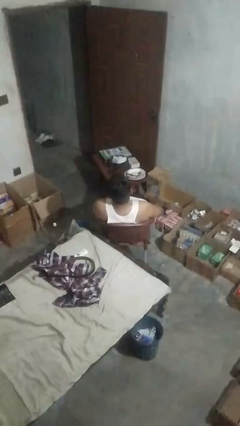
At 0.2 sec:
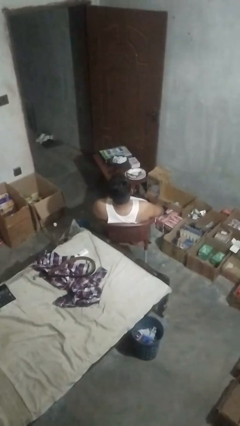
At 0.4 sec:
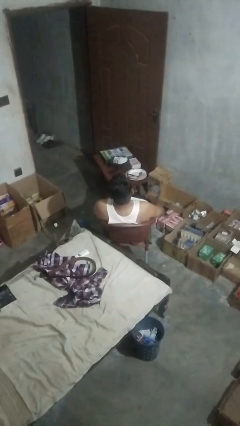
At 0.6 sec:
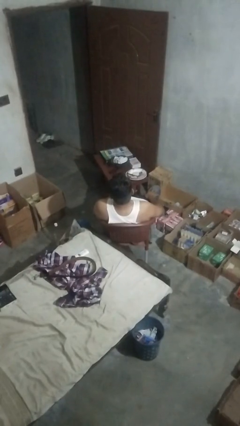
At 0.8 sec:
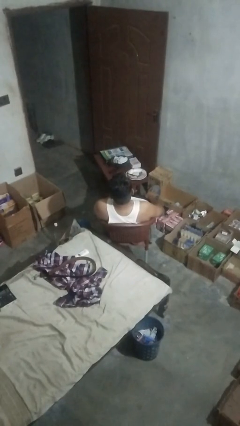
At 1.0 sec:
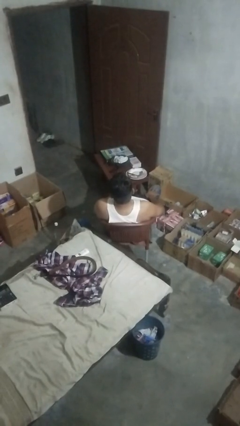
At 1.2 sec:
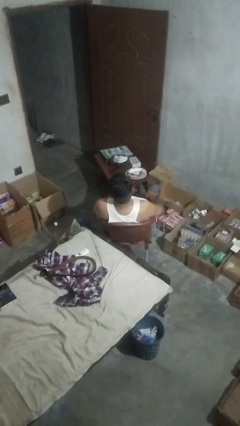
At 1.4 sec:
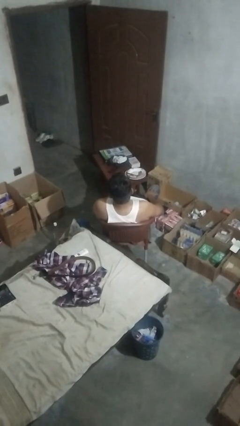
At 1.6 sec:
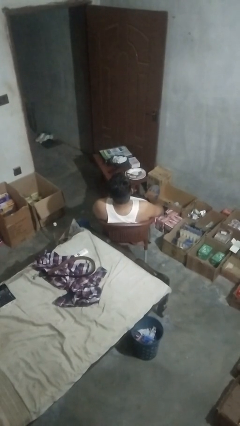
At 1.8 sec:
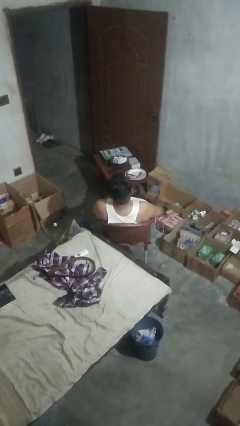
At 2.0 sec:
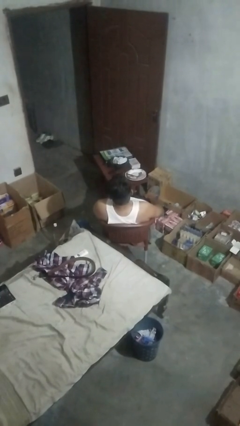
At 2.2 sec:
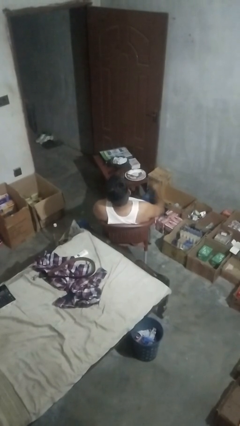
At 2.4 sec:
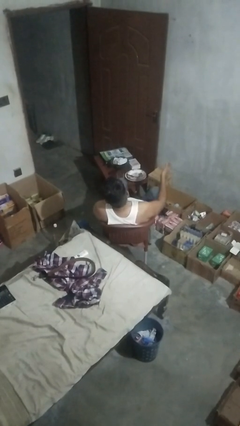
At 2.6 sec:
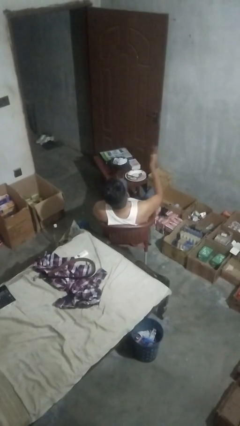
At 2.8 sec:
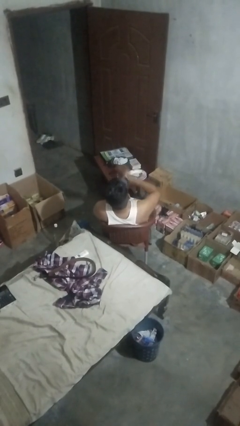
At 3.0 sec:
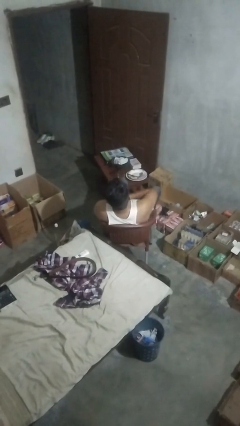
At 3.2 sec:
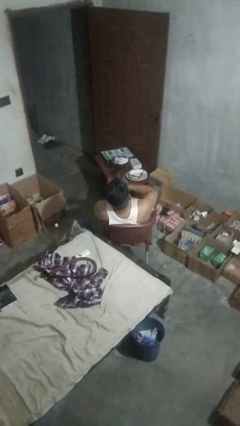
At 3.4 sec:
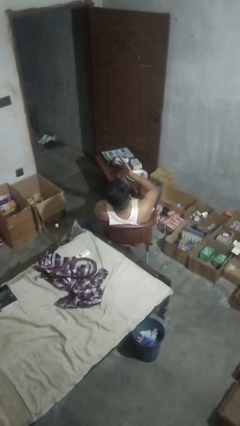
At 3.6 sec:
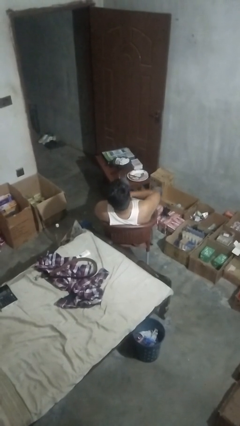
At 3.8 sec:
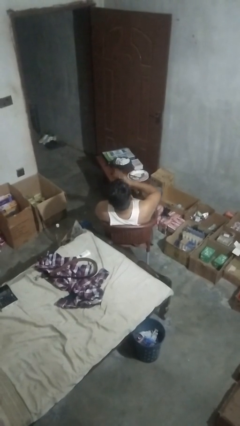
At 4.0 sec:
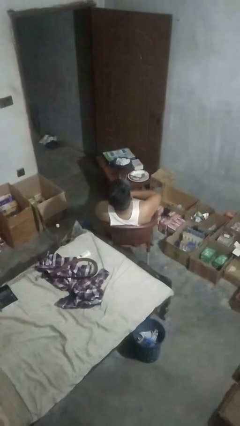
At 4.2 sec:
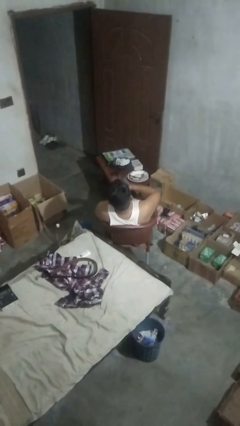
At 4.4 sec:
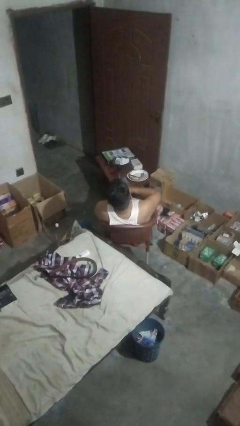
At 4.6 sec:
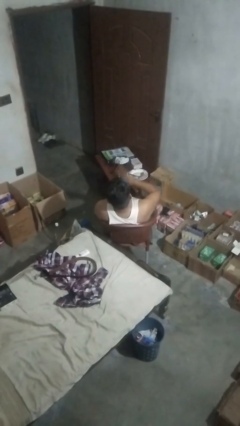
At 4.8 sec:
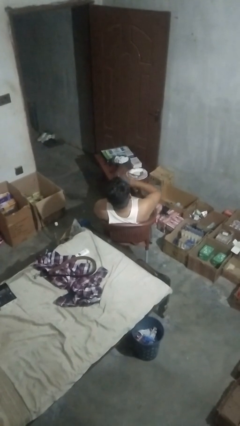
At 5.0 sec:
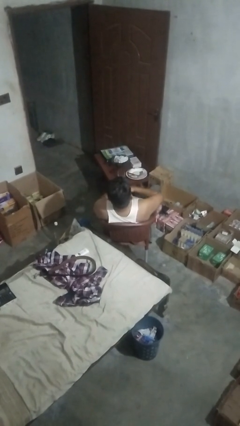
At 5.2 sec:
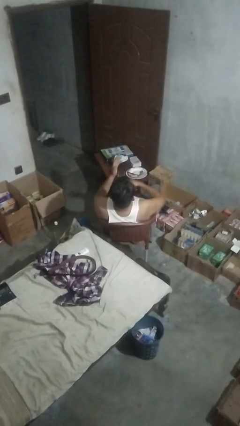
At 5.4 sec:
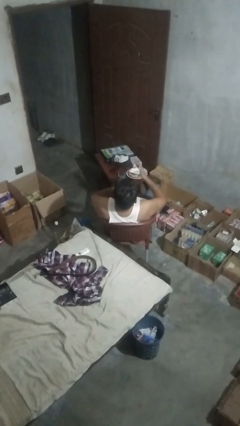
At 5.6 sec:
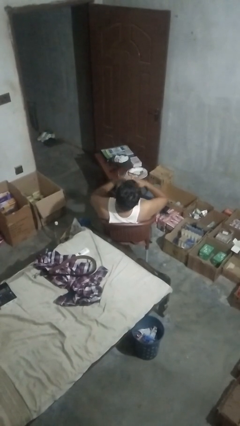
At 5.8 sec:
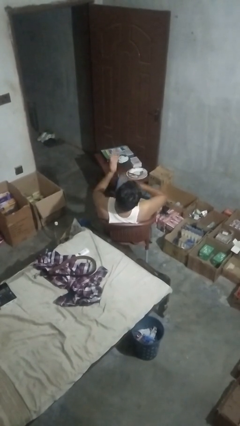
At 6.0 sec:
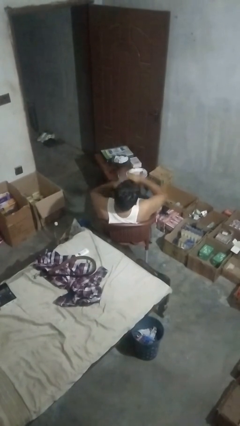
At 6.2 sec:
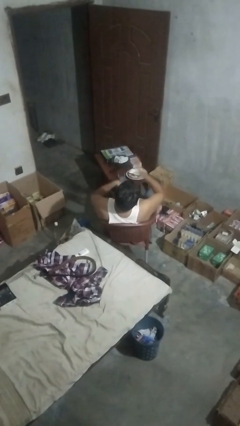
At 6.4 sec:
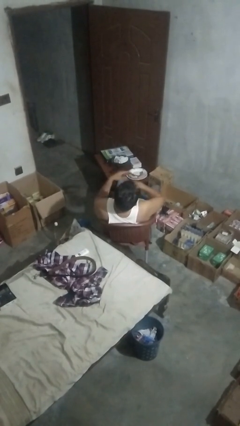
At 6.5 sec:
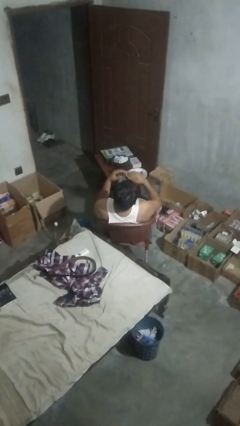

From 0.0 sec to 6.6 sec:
person drums on chest

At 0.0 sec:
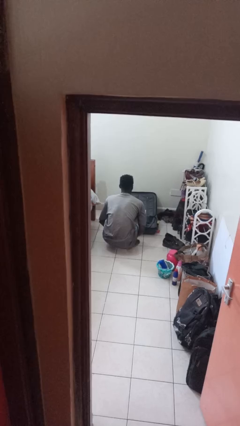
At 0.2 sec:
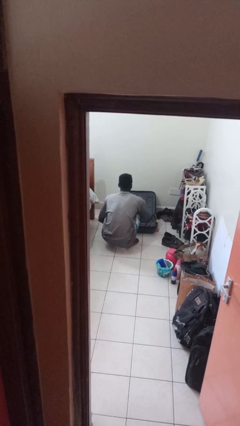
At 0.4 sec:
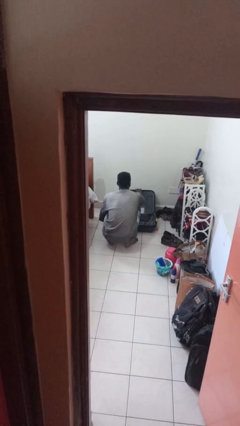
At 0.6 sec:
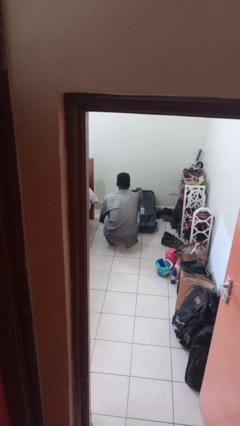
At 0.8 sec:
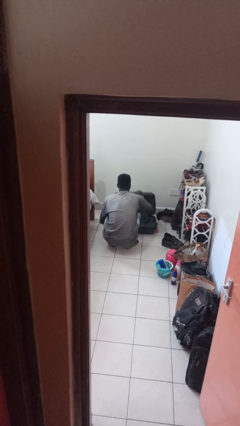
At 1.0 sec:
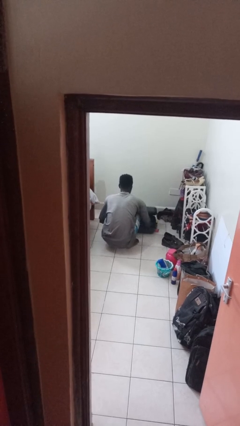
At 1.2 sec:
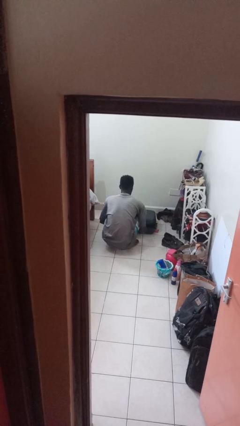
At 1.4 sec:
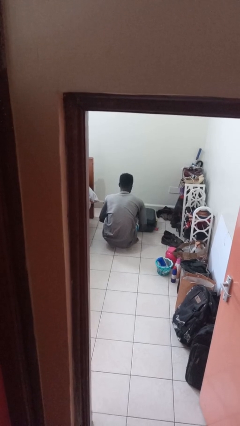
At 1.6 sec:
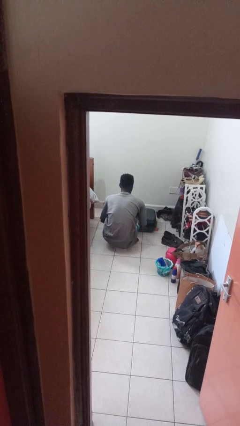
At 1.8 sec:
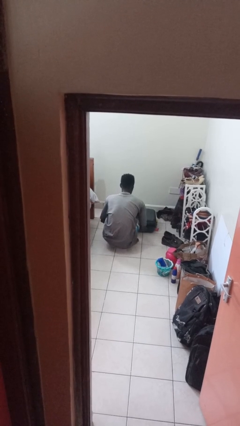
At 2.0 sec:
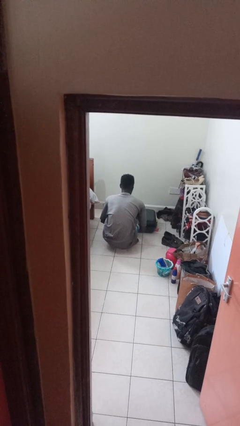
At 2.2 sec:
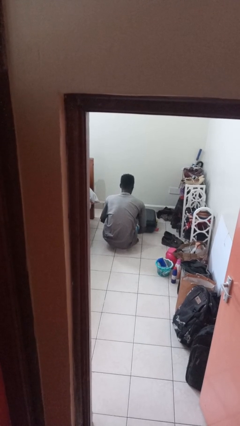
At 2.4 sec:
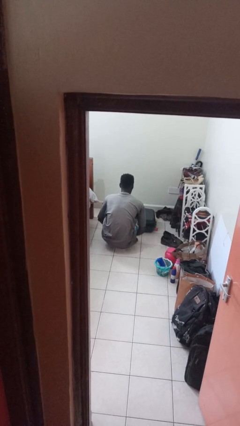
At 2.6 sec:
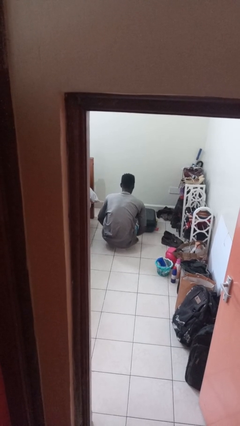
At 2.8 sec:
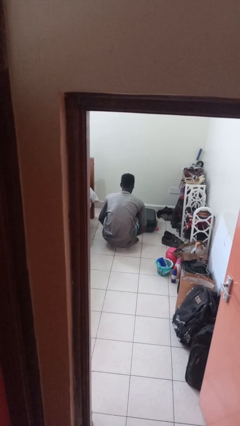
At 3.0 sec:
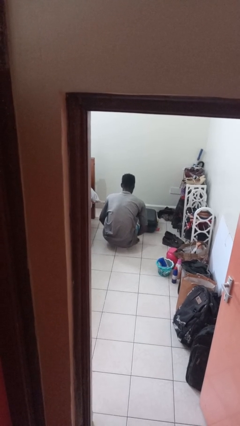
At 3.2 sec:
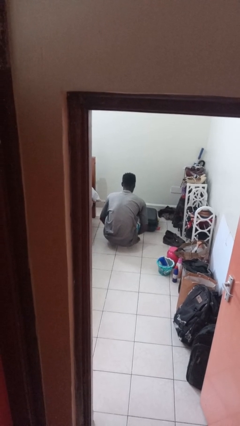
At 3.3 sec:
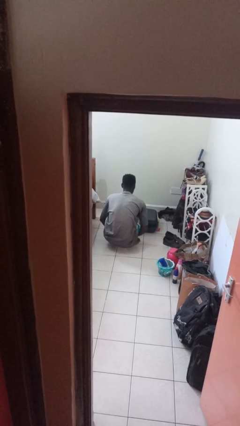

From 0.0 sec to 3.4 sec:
person closes suitcase

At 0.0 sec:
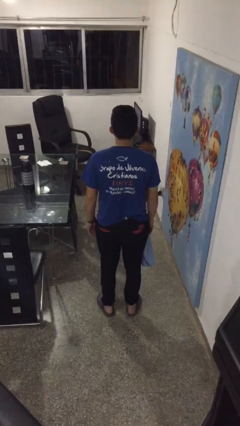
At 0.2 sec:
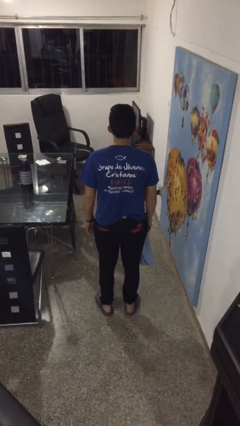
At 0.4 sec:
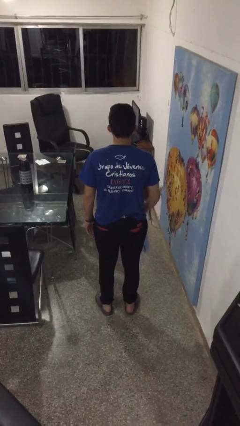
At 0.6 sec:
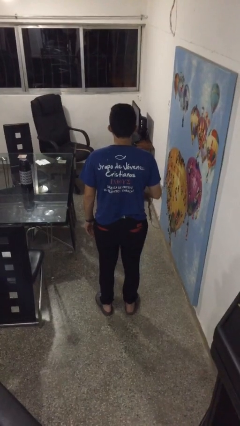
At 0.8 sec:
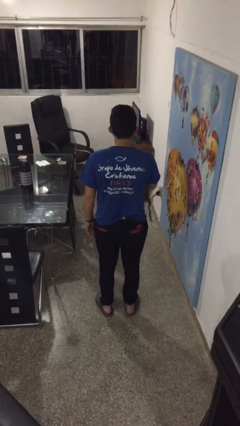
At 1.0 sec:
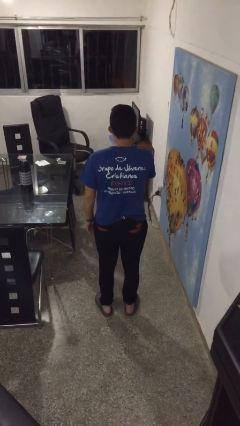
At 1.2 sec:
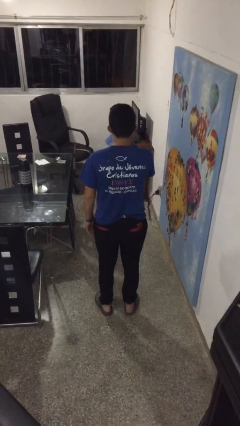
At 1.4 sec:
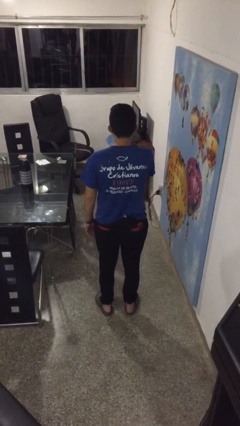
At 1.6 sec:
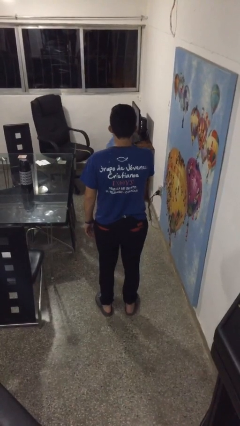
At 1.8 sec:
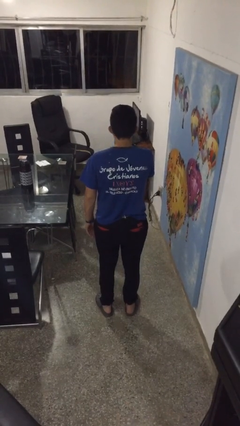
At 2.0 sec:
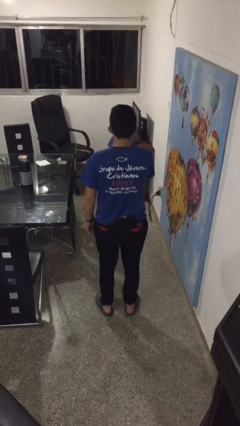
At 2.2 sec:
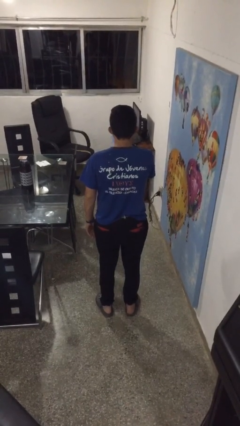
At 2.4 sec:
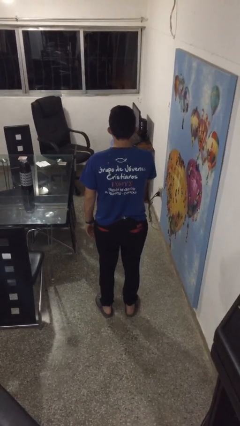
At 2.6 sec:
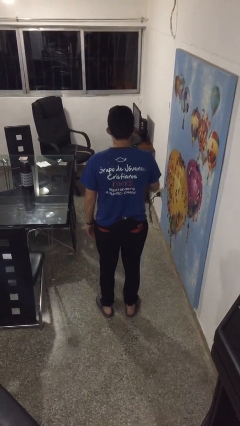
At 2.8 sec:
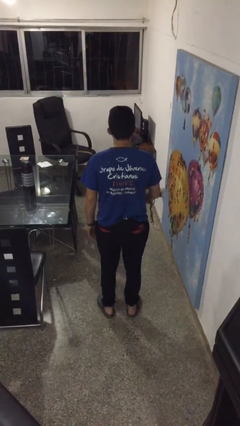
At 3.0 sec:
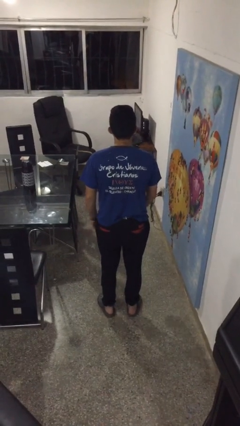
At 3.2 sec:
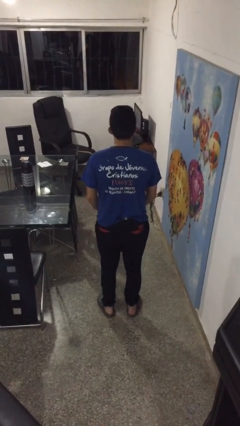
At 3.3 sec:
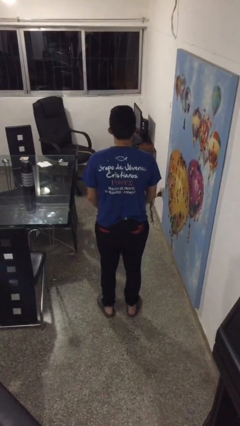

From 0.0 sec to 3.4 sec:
person wipes mouth with napkin

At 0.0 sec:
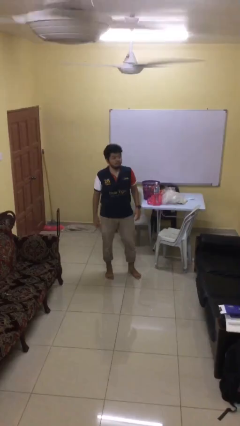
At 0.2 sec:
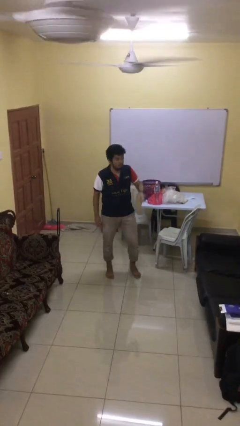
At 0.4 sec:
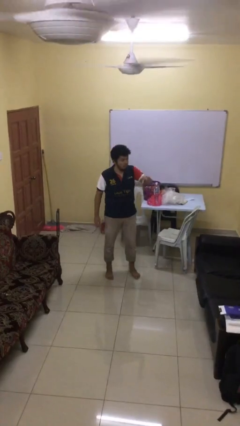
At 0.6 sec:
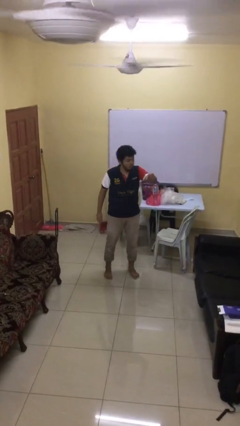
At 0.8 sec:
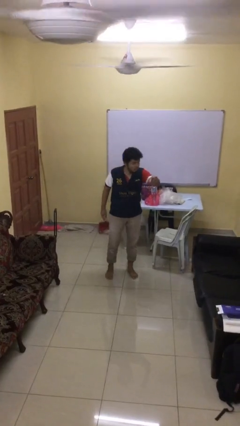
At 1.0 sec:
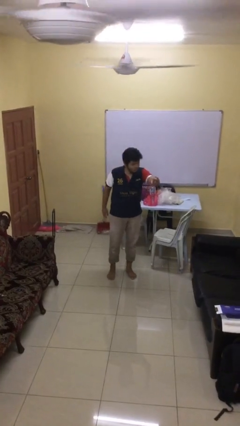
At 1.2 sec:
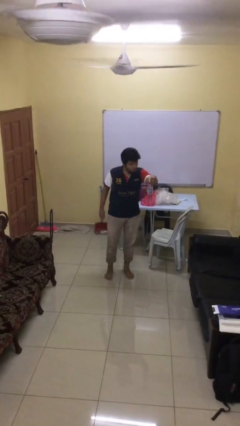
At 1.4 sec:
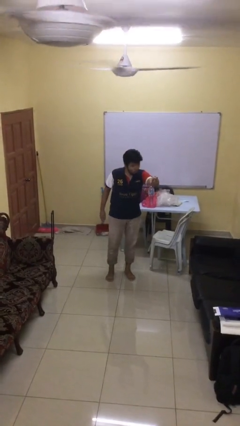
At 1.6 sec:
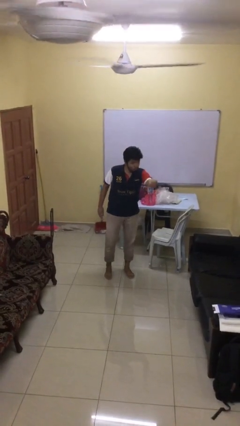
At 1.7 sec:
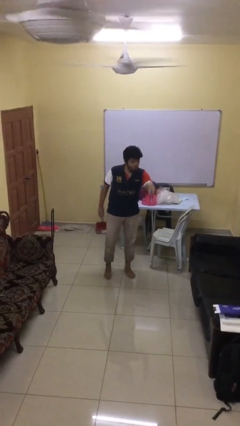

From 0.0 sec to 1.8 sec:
person points at person

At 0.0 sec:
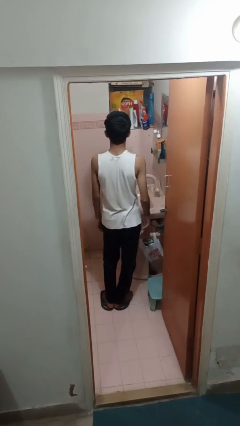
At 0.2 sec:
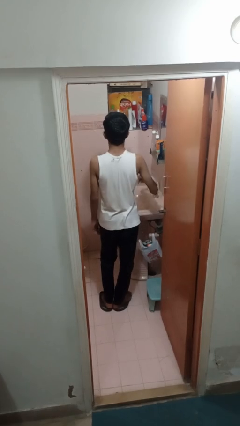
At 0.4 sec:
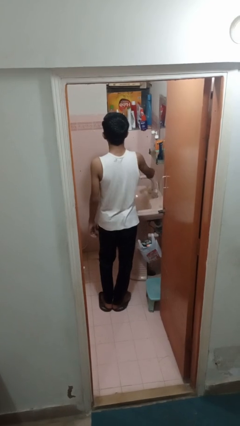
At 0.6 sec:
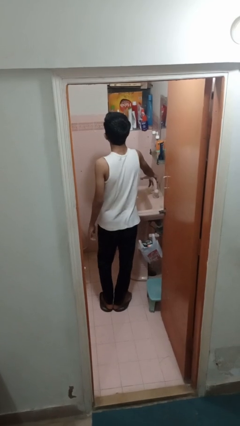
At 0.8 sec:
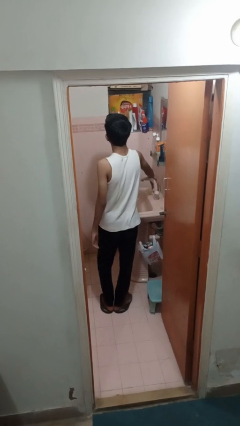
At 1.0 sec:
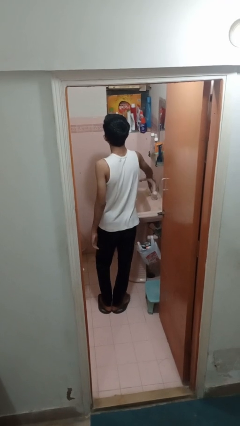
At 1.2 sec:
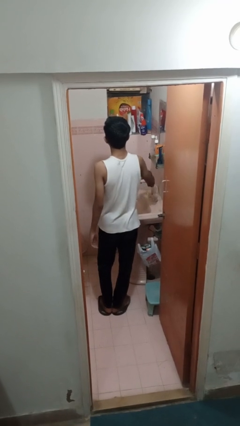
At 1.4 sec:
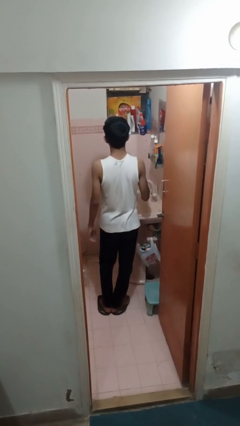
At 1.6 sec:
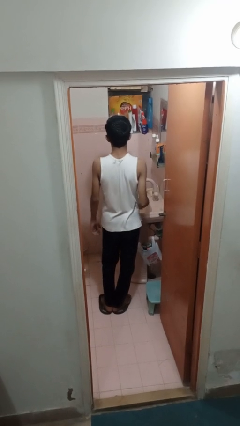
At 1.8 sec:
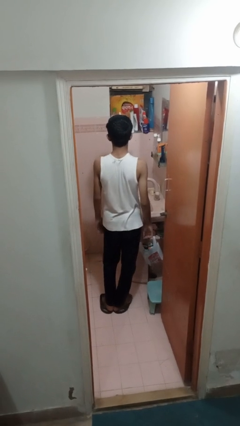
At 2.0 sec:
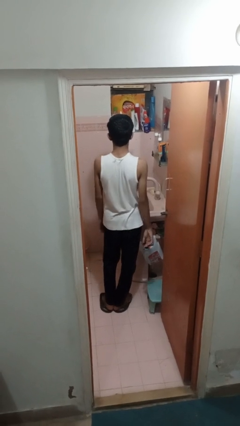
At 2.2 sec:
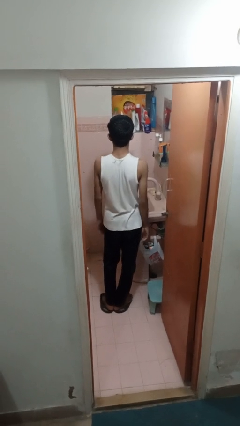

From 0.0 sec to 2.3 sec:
person turns on faucet
